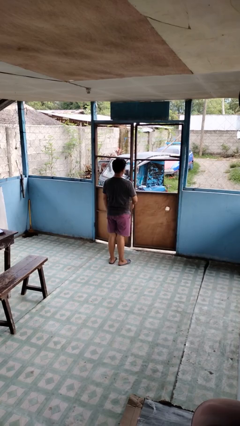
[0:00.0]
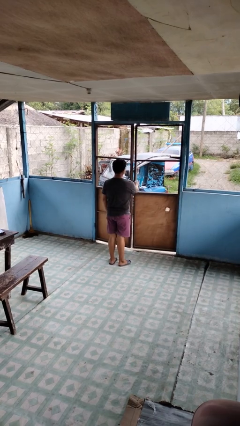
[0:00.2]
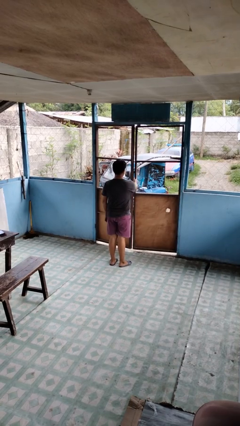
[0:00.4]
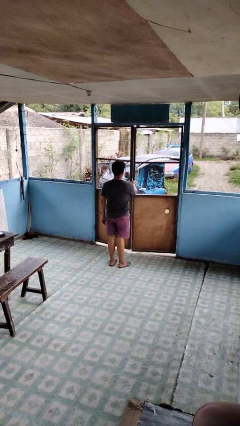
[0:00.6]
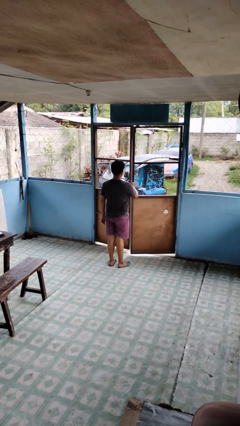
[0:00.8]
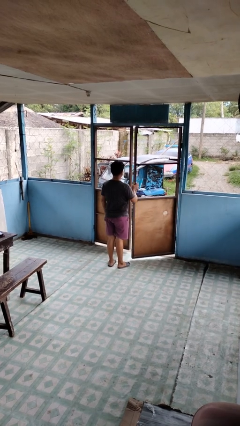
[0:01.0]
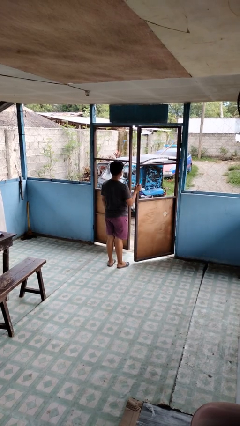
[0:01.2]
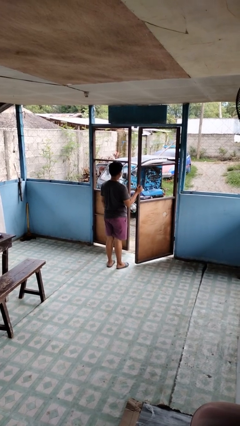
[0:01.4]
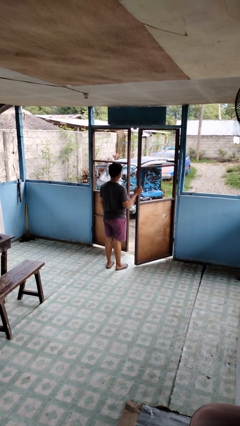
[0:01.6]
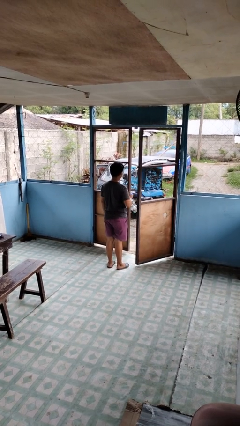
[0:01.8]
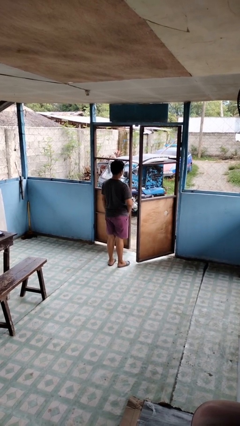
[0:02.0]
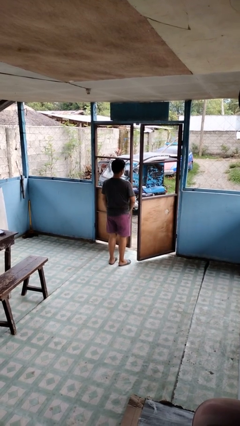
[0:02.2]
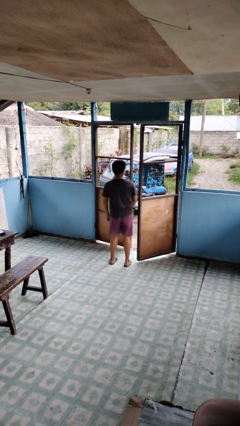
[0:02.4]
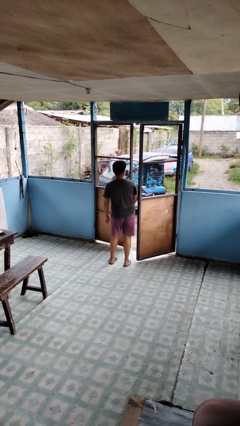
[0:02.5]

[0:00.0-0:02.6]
person opens facility door

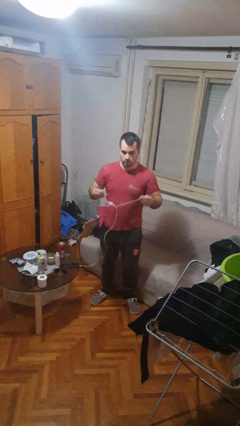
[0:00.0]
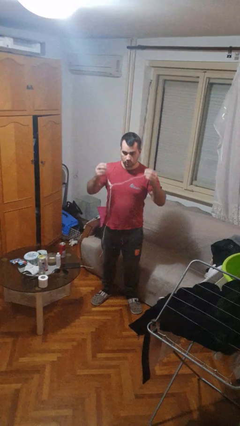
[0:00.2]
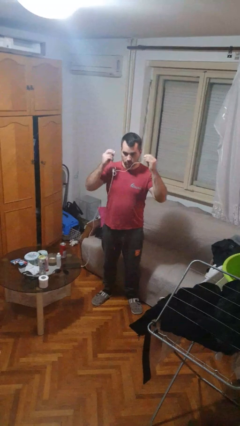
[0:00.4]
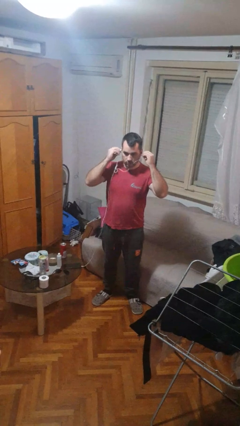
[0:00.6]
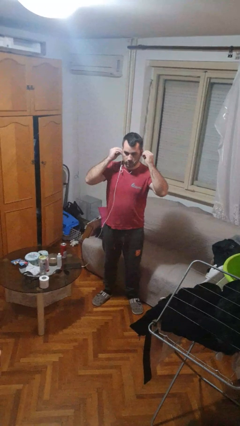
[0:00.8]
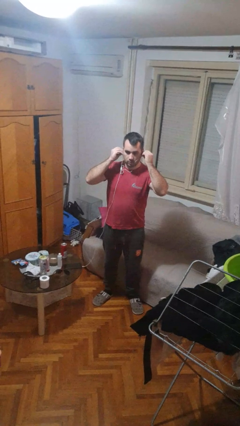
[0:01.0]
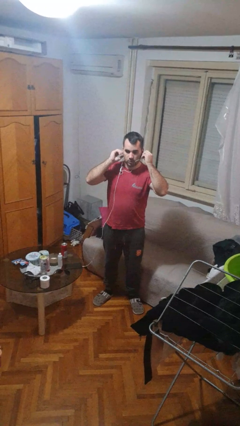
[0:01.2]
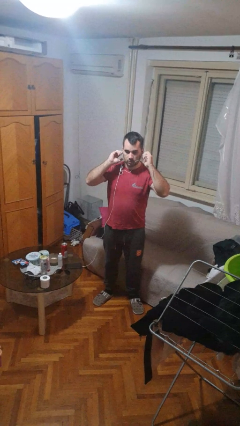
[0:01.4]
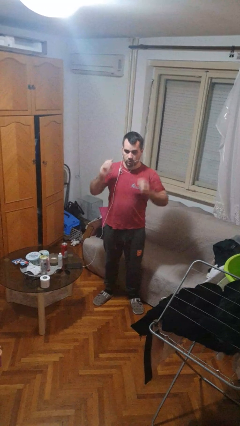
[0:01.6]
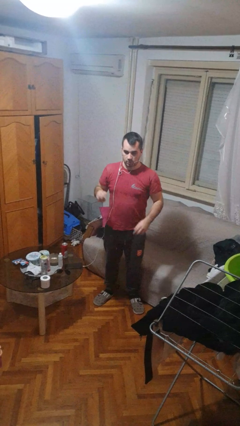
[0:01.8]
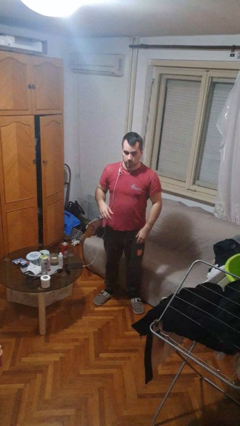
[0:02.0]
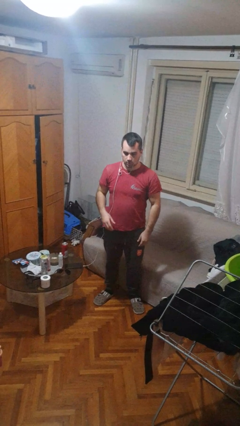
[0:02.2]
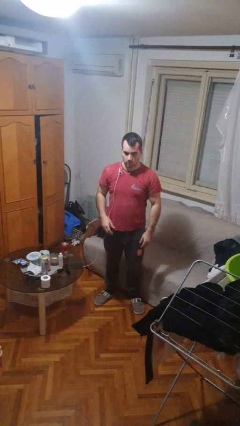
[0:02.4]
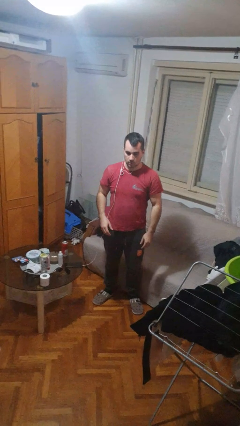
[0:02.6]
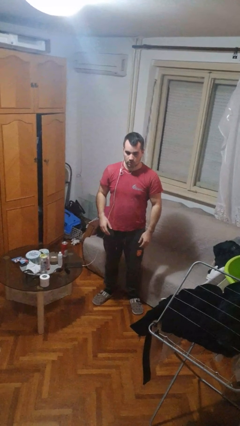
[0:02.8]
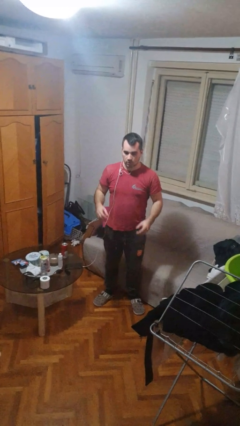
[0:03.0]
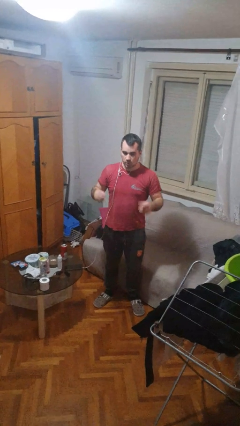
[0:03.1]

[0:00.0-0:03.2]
person puts on headphones

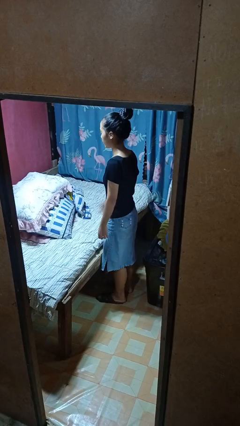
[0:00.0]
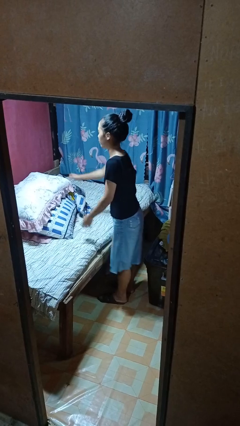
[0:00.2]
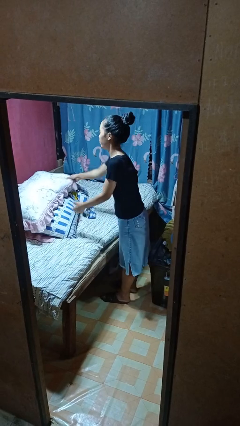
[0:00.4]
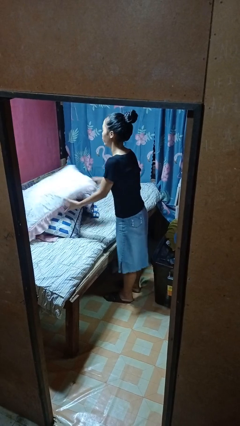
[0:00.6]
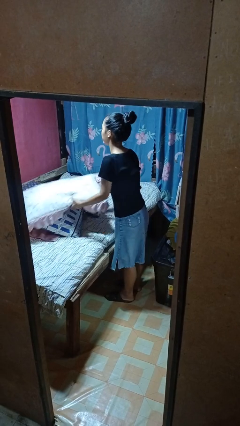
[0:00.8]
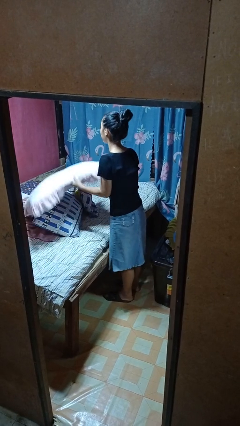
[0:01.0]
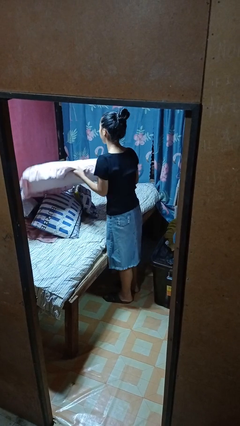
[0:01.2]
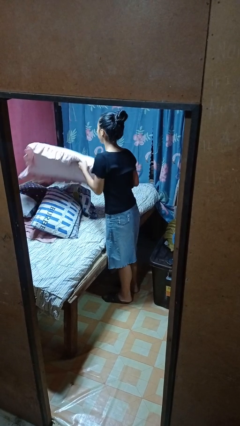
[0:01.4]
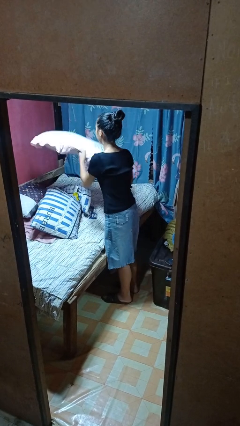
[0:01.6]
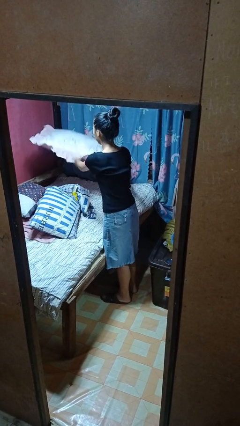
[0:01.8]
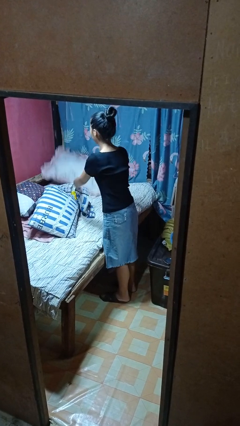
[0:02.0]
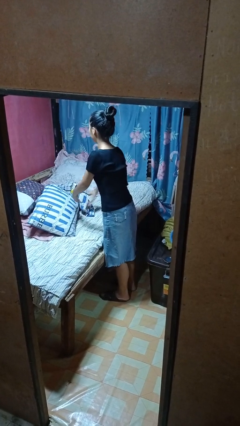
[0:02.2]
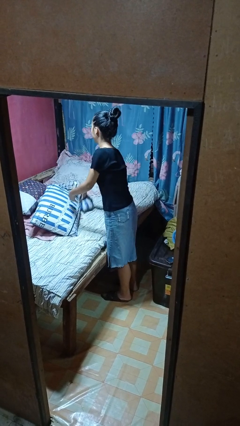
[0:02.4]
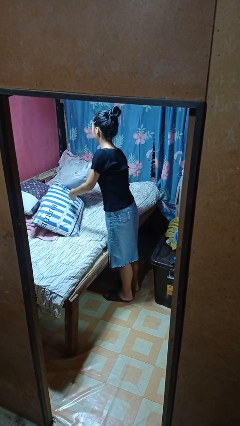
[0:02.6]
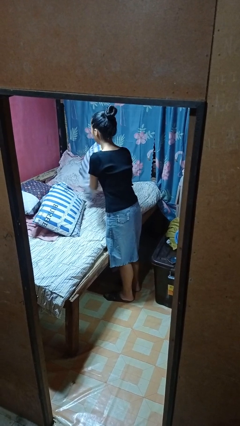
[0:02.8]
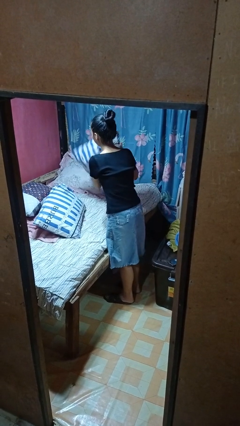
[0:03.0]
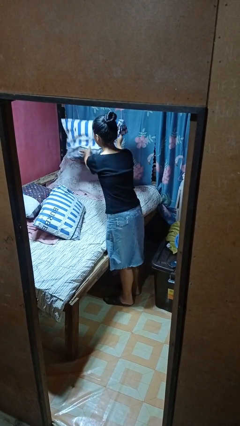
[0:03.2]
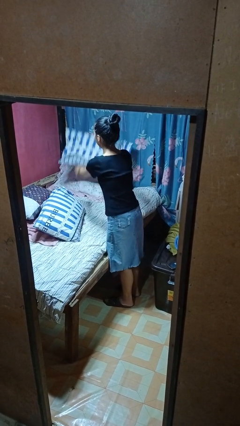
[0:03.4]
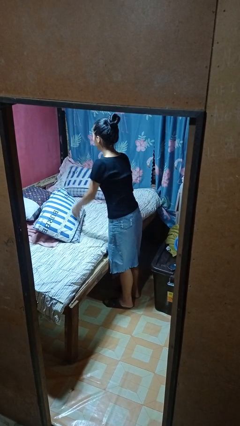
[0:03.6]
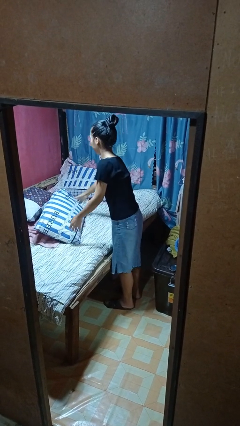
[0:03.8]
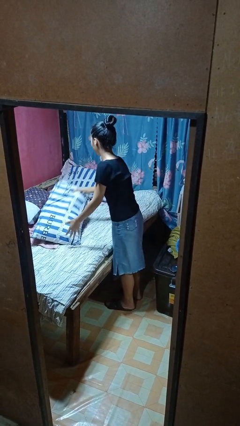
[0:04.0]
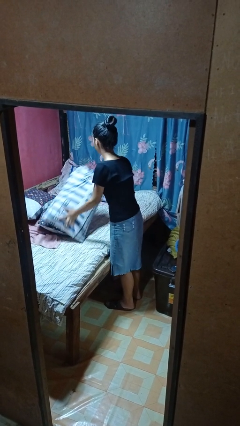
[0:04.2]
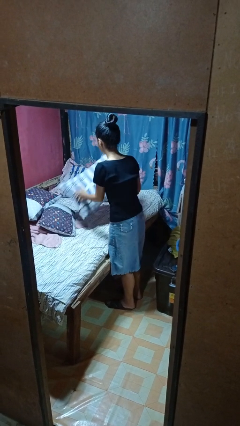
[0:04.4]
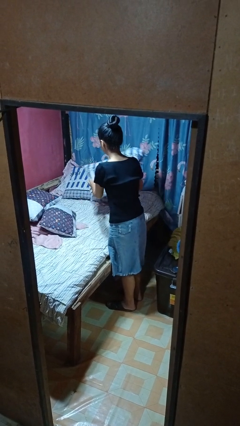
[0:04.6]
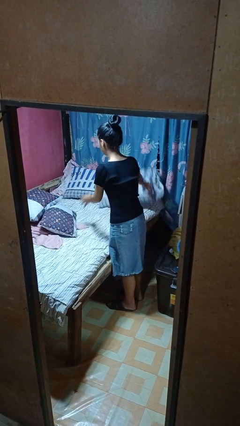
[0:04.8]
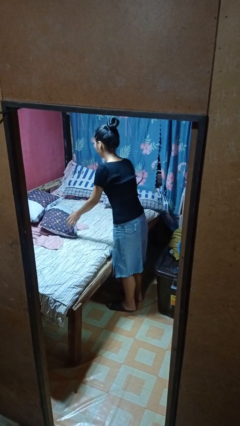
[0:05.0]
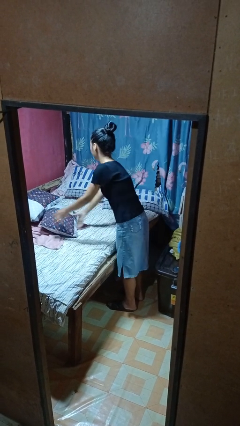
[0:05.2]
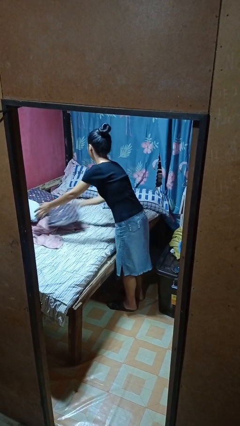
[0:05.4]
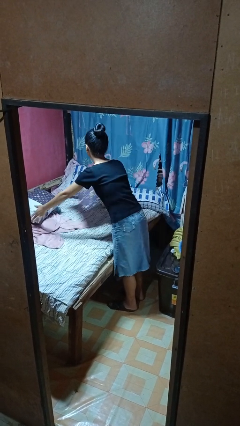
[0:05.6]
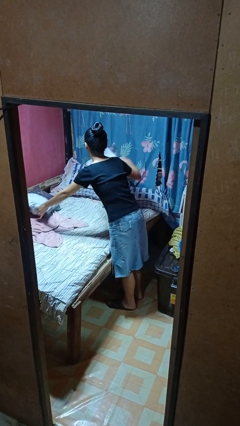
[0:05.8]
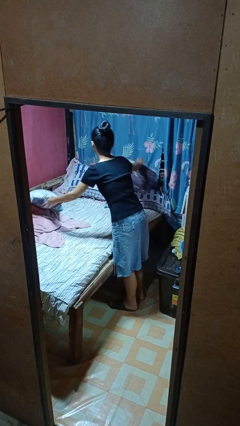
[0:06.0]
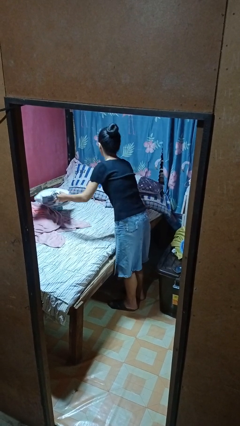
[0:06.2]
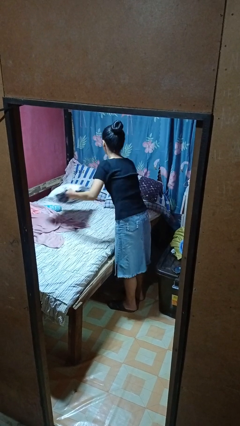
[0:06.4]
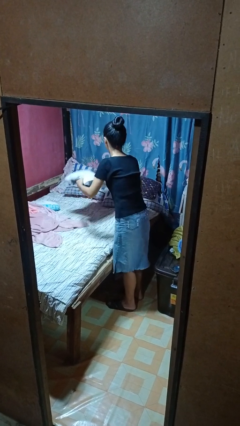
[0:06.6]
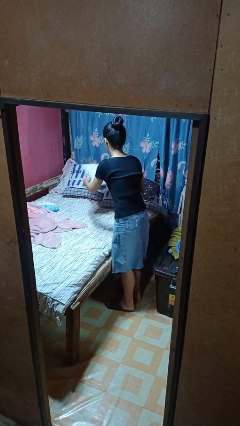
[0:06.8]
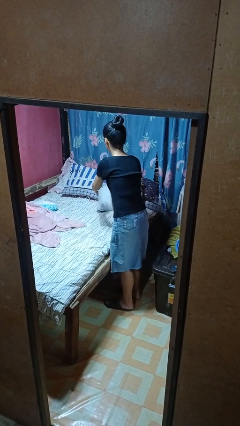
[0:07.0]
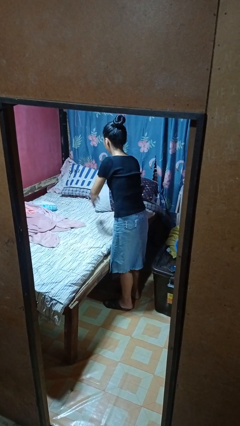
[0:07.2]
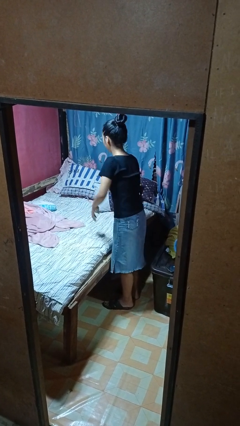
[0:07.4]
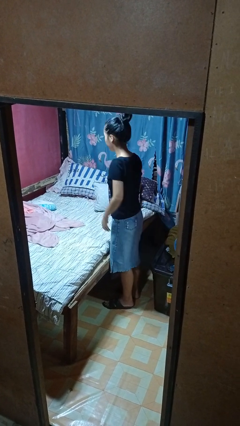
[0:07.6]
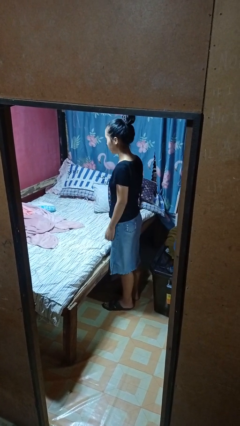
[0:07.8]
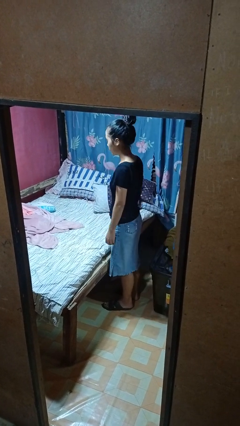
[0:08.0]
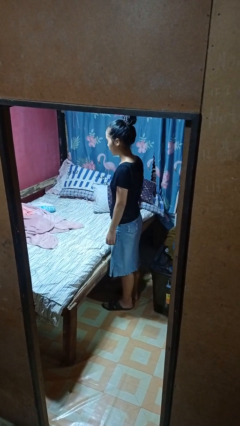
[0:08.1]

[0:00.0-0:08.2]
person makes bed

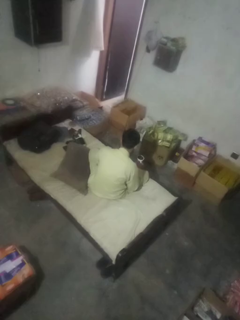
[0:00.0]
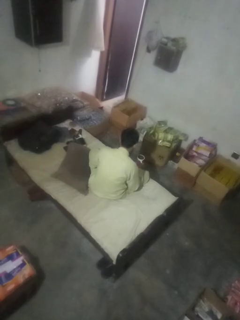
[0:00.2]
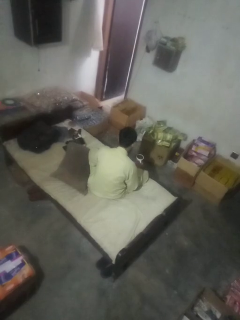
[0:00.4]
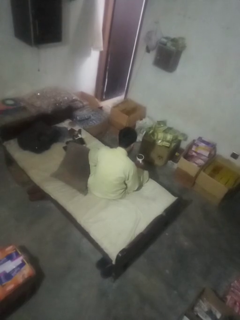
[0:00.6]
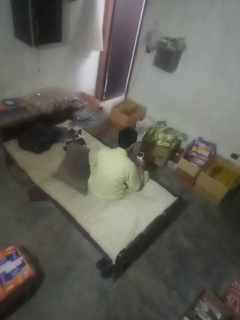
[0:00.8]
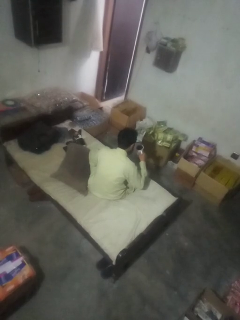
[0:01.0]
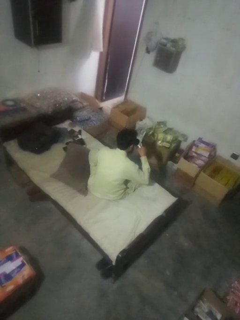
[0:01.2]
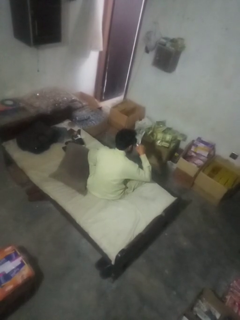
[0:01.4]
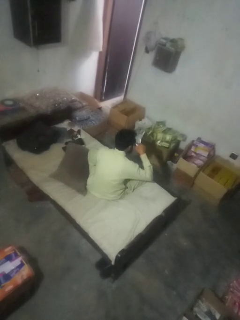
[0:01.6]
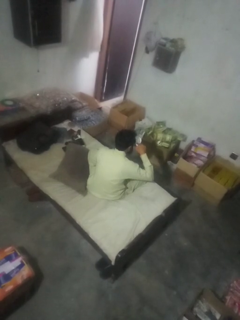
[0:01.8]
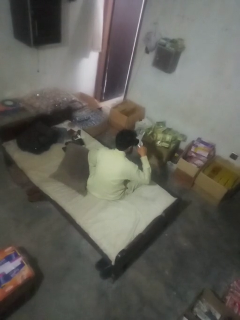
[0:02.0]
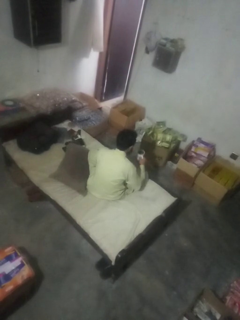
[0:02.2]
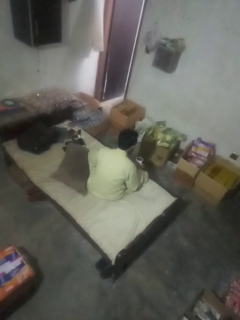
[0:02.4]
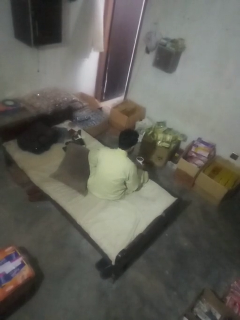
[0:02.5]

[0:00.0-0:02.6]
person drinks from mug

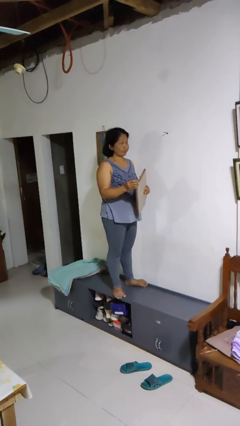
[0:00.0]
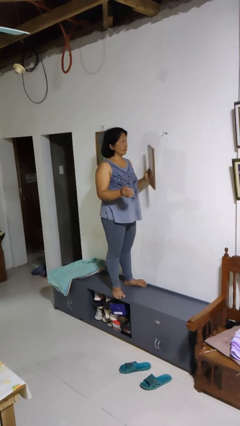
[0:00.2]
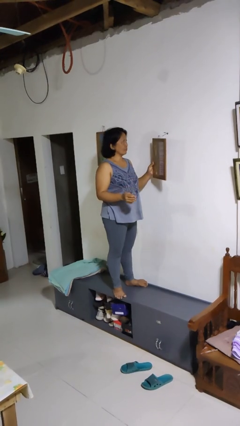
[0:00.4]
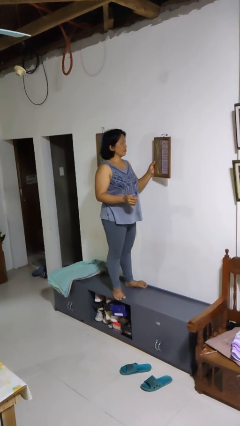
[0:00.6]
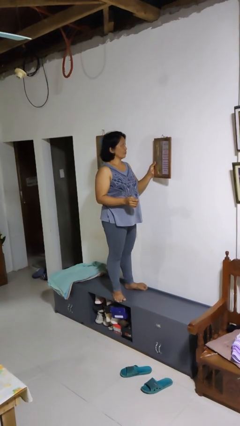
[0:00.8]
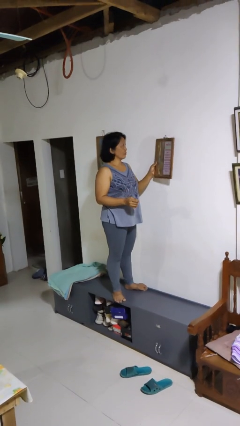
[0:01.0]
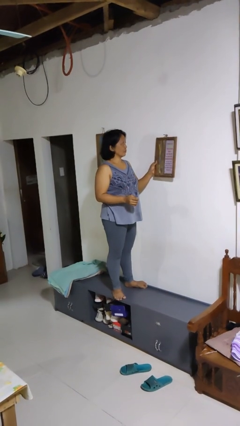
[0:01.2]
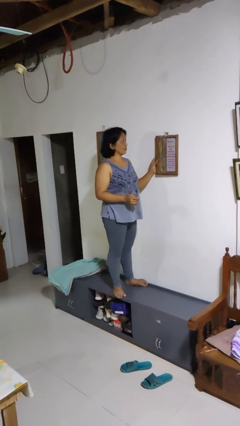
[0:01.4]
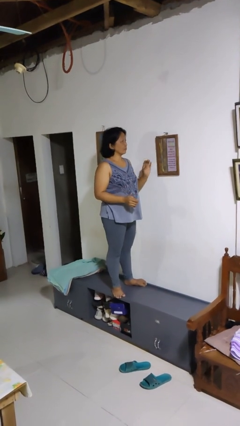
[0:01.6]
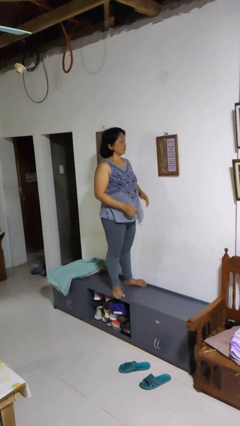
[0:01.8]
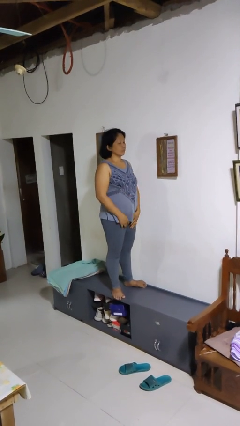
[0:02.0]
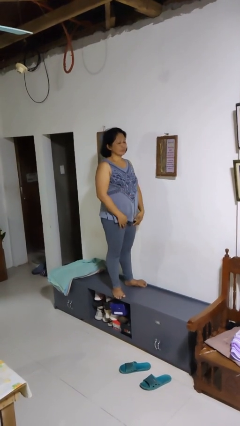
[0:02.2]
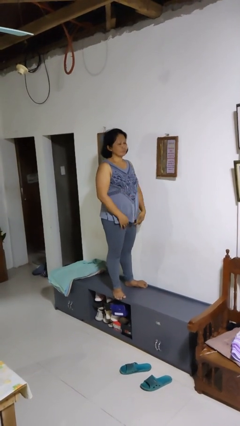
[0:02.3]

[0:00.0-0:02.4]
person puts up picture frame
